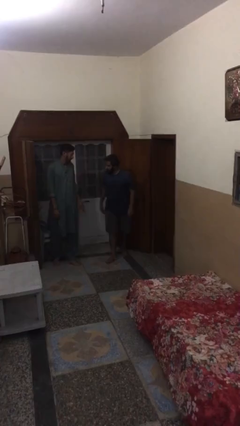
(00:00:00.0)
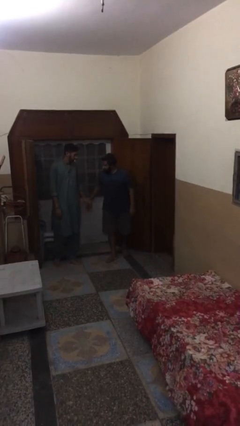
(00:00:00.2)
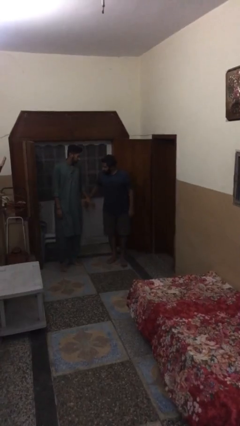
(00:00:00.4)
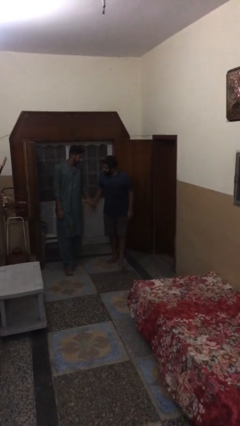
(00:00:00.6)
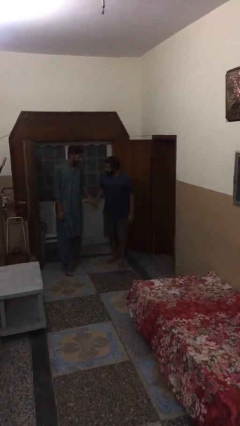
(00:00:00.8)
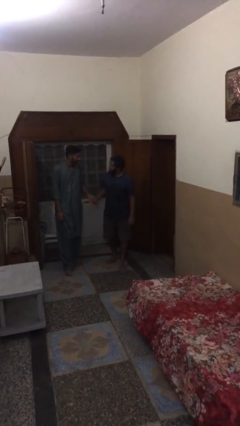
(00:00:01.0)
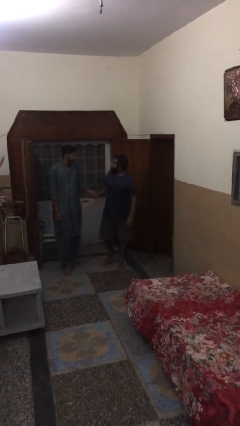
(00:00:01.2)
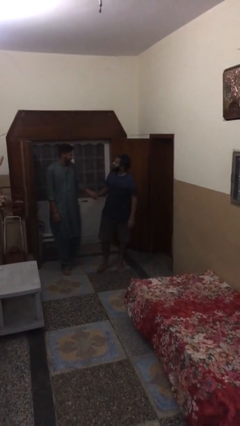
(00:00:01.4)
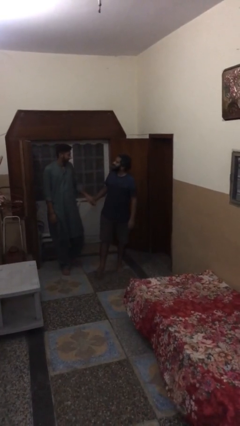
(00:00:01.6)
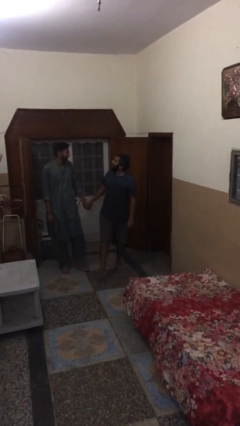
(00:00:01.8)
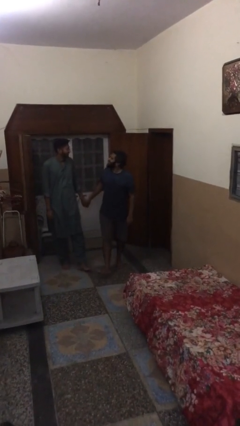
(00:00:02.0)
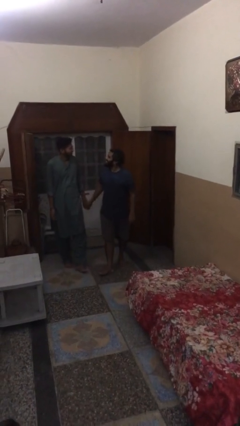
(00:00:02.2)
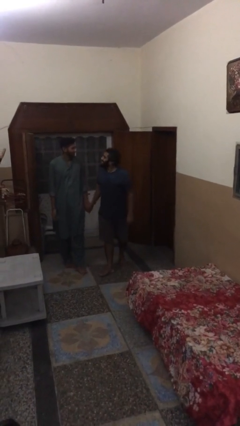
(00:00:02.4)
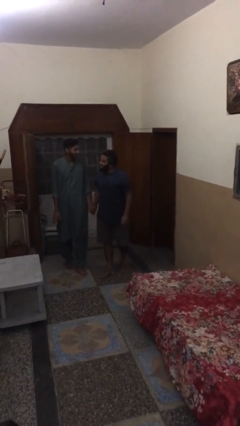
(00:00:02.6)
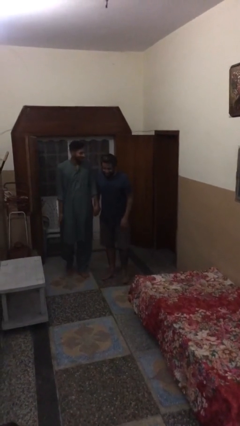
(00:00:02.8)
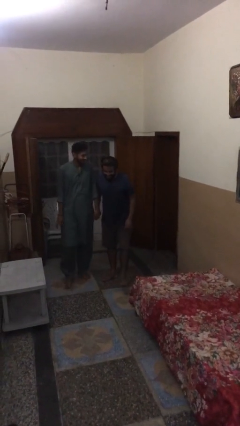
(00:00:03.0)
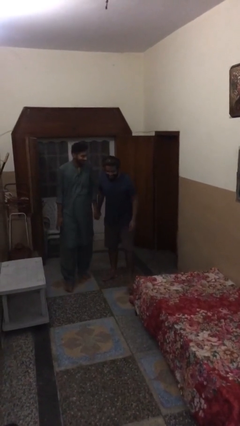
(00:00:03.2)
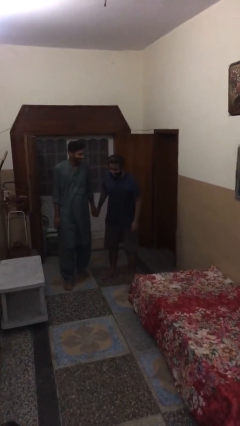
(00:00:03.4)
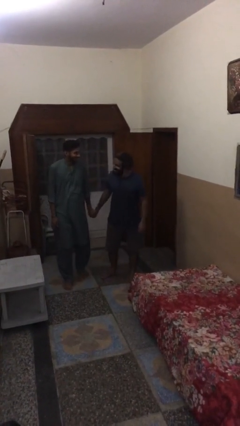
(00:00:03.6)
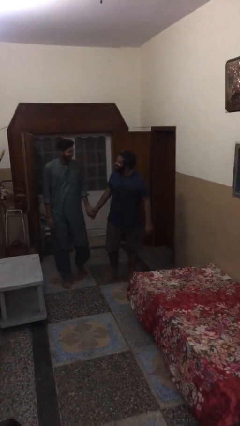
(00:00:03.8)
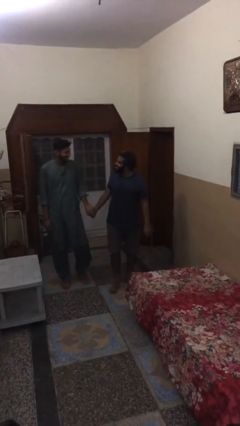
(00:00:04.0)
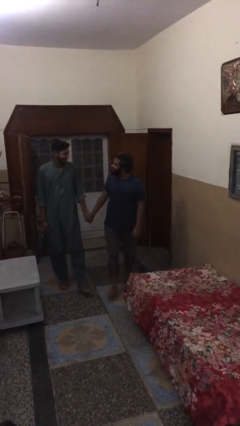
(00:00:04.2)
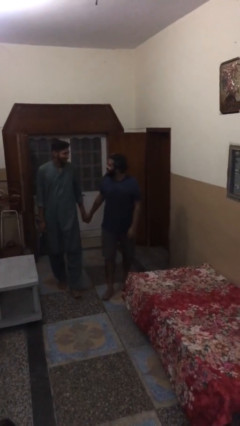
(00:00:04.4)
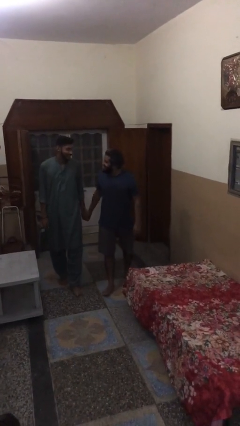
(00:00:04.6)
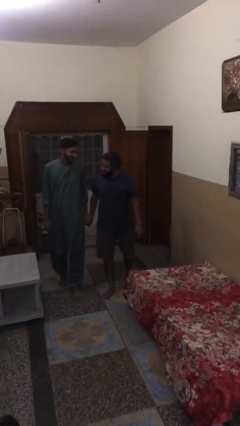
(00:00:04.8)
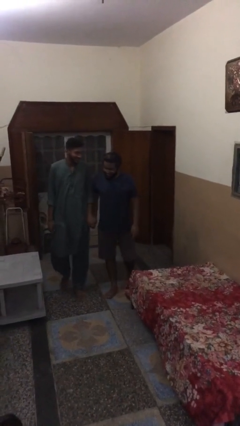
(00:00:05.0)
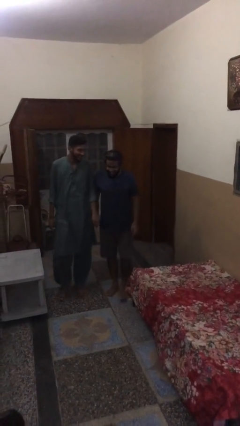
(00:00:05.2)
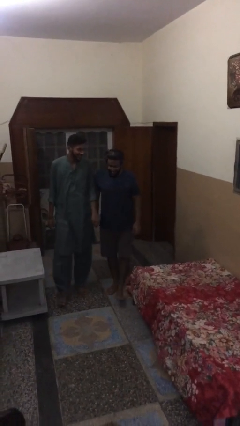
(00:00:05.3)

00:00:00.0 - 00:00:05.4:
person holds hand

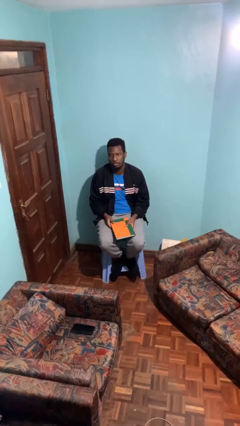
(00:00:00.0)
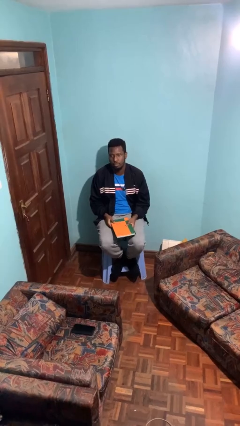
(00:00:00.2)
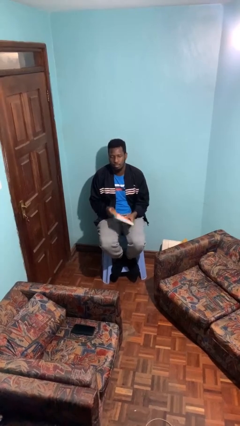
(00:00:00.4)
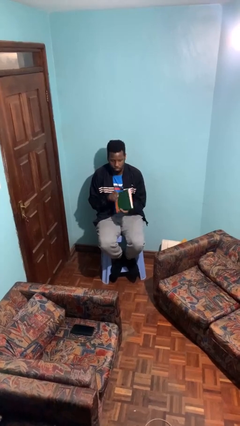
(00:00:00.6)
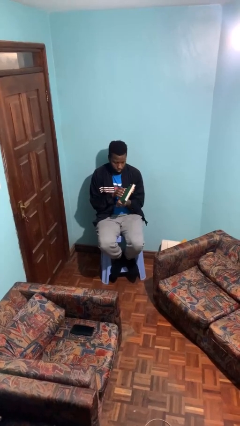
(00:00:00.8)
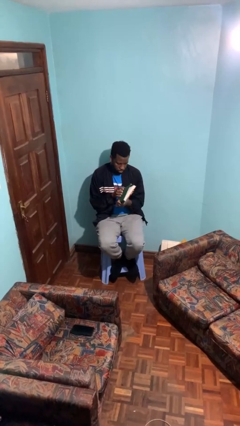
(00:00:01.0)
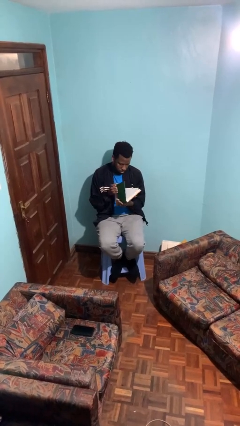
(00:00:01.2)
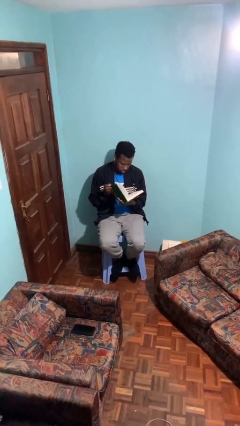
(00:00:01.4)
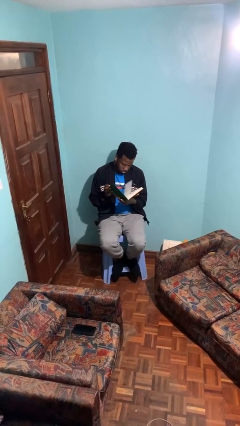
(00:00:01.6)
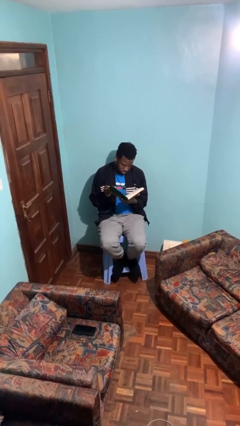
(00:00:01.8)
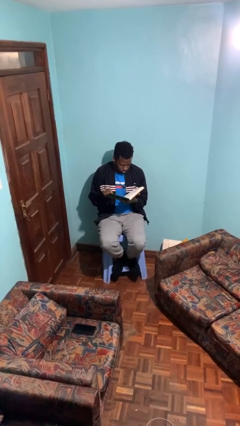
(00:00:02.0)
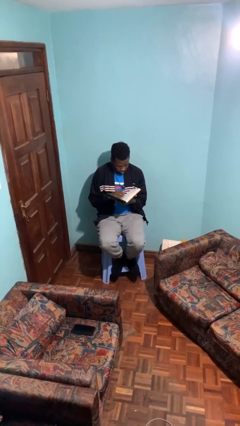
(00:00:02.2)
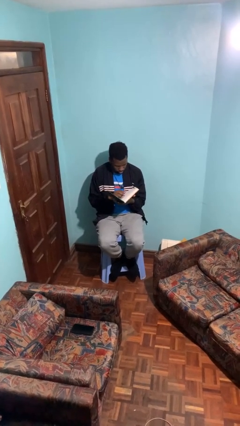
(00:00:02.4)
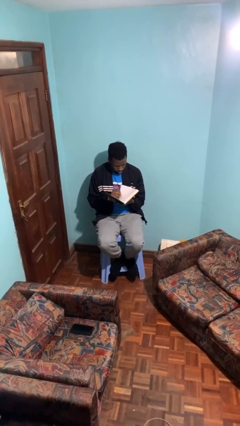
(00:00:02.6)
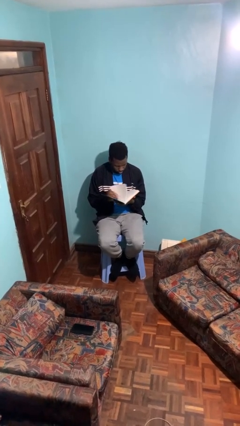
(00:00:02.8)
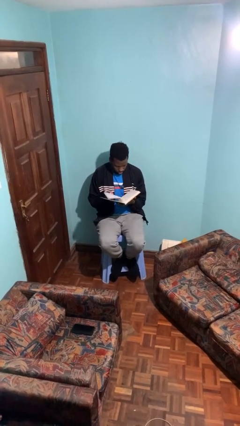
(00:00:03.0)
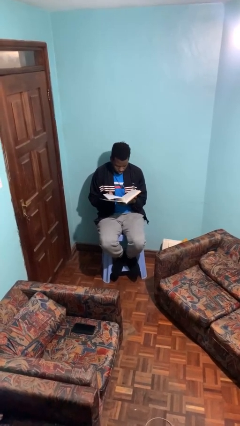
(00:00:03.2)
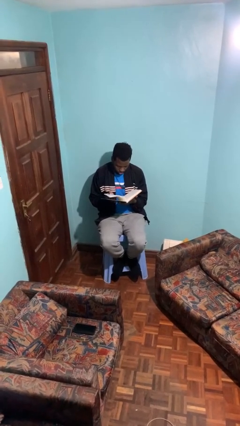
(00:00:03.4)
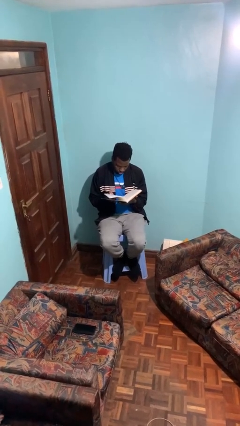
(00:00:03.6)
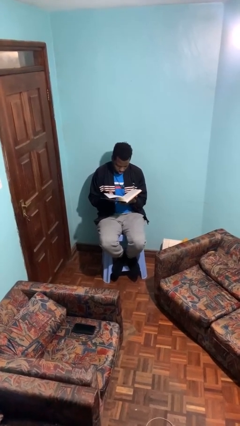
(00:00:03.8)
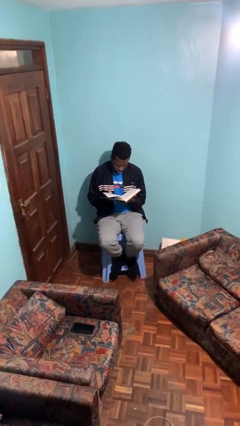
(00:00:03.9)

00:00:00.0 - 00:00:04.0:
person reads book

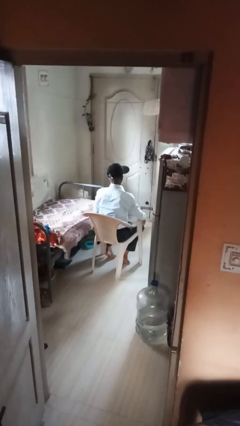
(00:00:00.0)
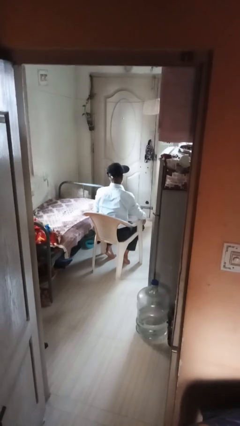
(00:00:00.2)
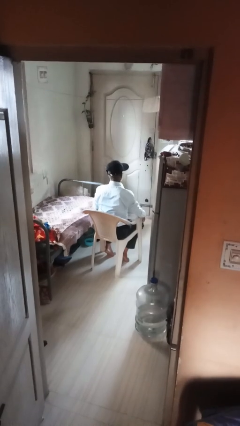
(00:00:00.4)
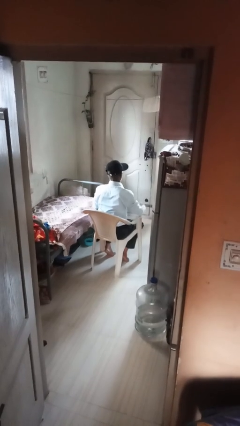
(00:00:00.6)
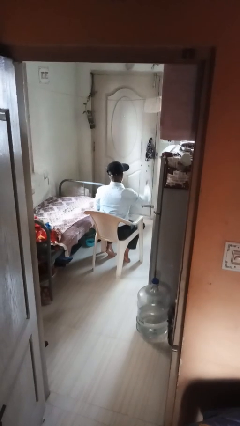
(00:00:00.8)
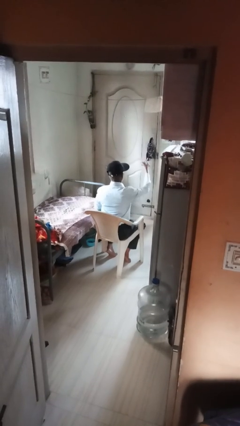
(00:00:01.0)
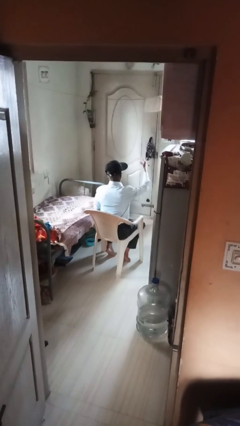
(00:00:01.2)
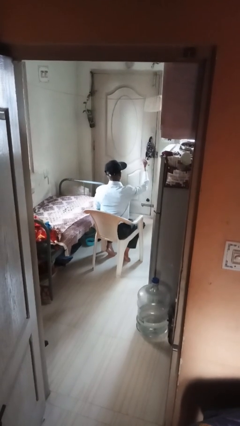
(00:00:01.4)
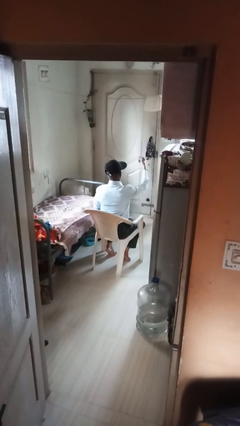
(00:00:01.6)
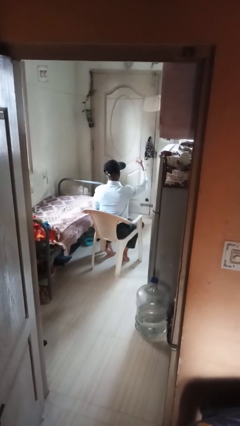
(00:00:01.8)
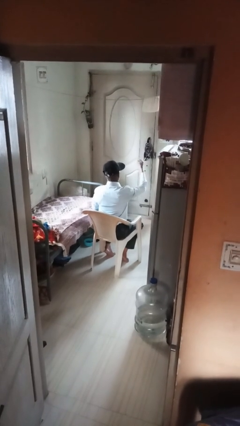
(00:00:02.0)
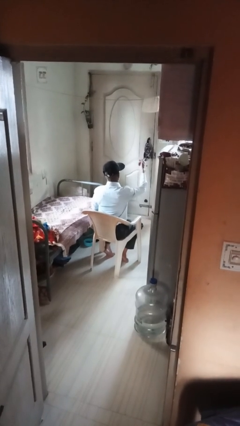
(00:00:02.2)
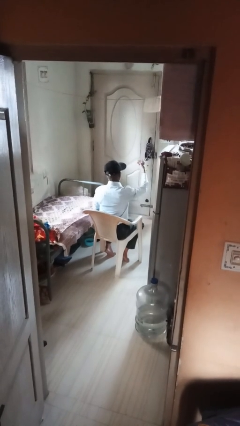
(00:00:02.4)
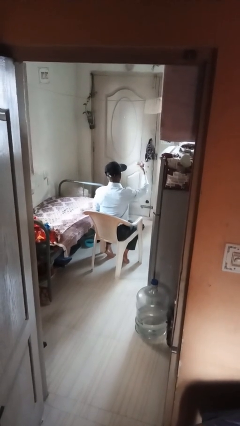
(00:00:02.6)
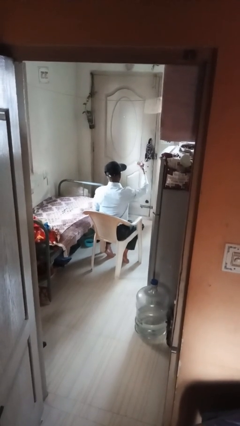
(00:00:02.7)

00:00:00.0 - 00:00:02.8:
person snaps fingers

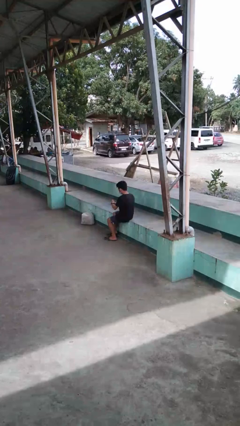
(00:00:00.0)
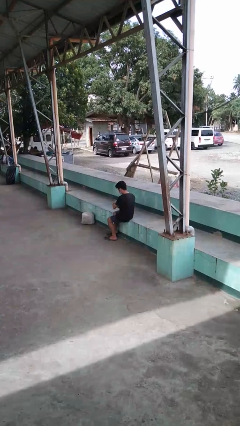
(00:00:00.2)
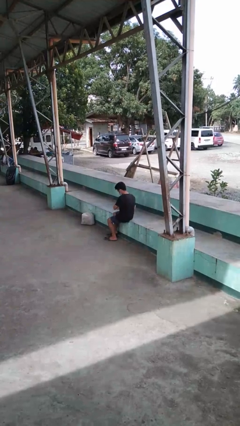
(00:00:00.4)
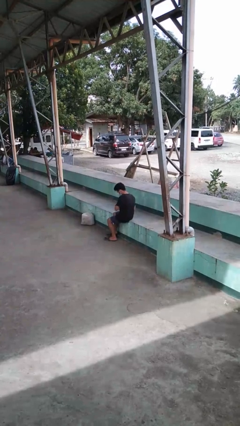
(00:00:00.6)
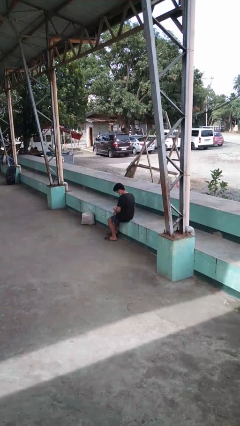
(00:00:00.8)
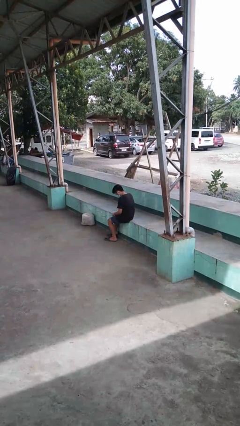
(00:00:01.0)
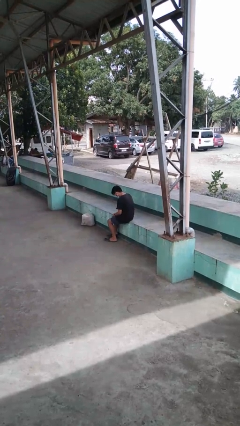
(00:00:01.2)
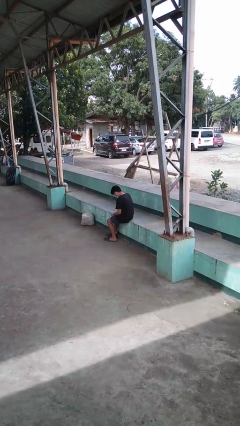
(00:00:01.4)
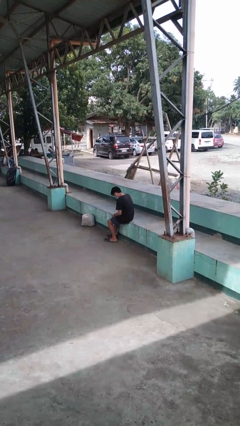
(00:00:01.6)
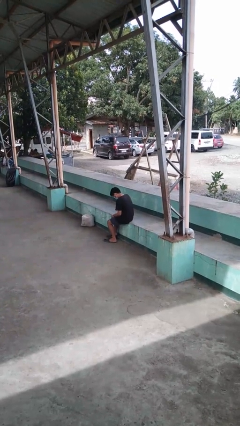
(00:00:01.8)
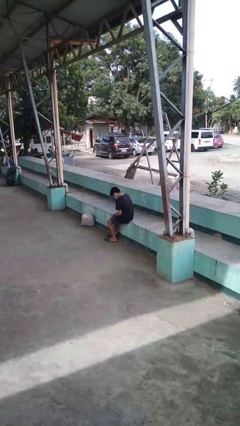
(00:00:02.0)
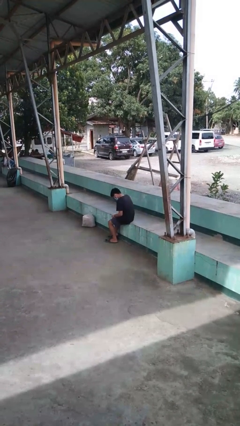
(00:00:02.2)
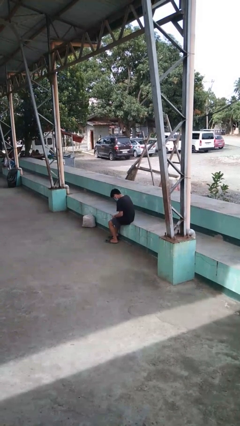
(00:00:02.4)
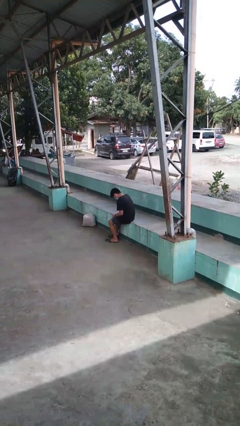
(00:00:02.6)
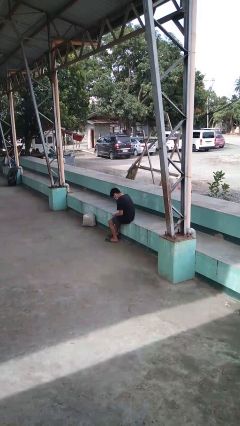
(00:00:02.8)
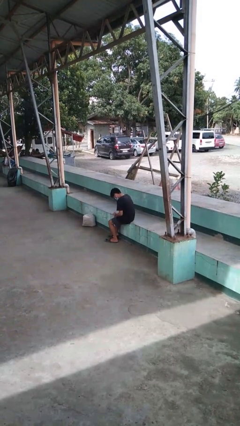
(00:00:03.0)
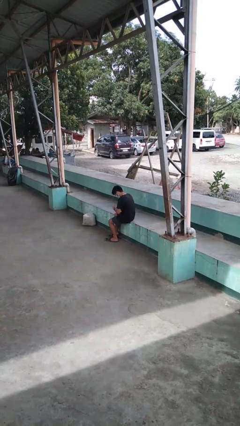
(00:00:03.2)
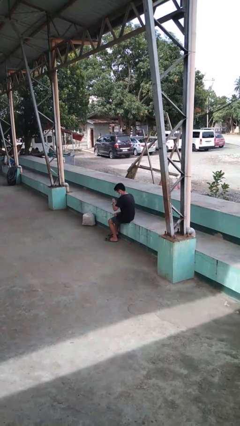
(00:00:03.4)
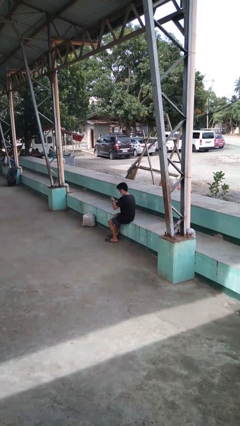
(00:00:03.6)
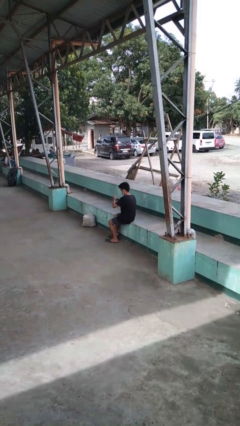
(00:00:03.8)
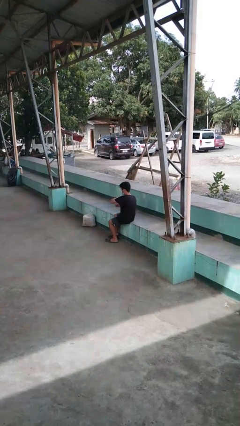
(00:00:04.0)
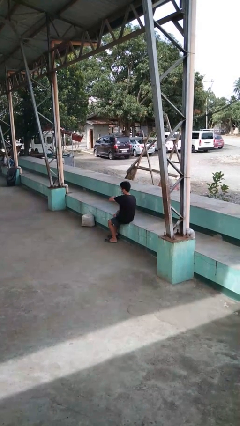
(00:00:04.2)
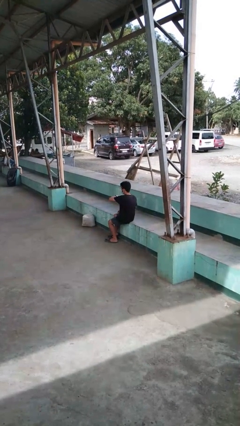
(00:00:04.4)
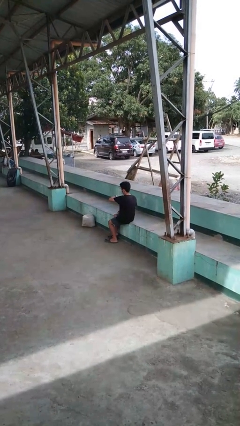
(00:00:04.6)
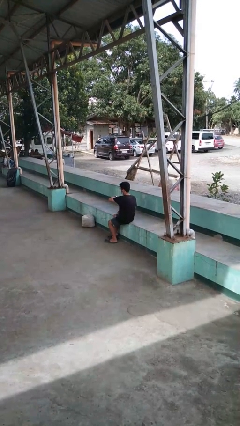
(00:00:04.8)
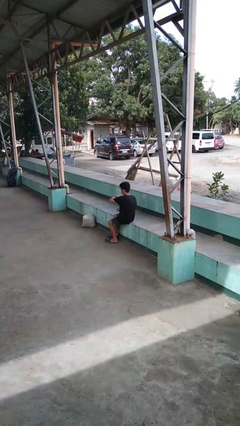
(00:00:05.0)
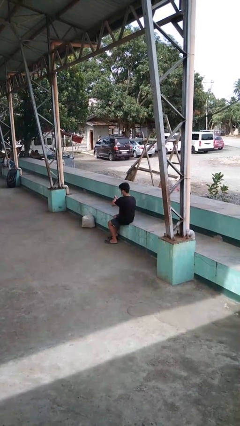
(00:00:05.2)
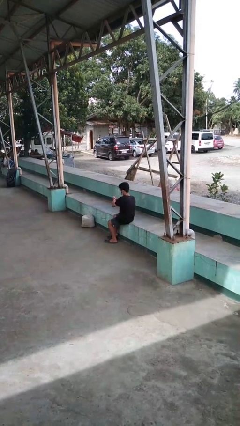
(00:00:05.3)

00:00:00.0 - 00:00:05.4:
person puts on wristwatch
